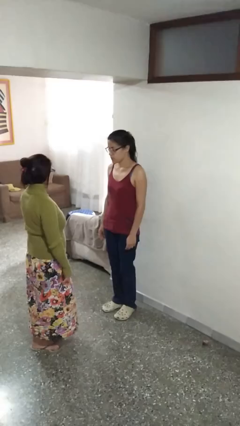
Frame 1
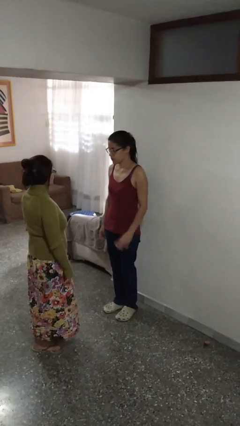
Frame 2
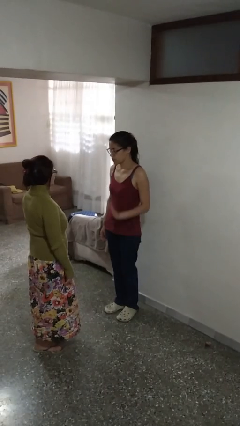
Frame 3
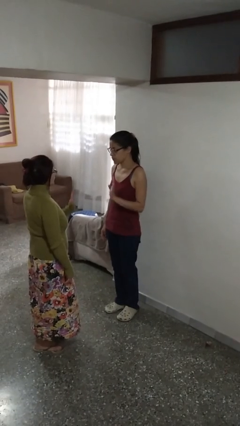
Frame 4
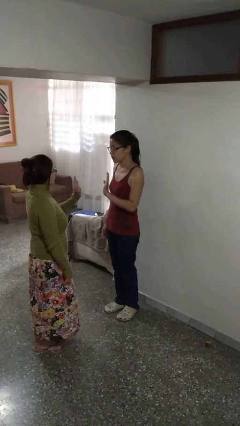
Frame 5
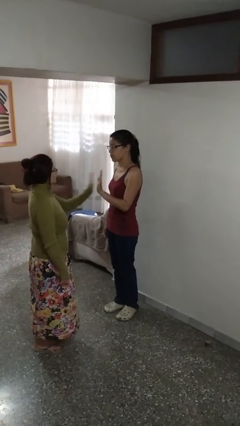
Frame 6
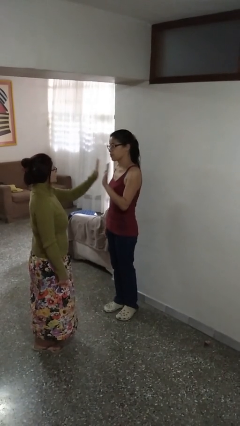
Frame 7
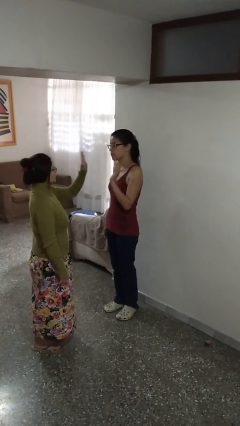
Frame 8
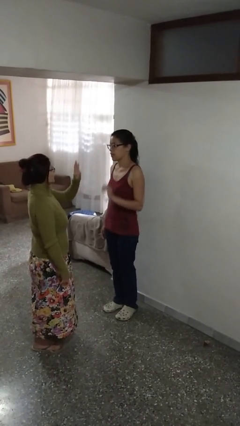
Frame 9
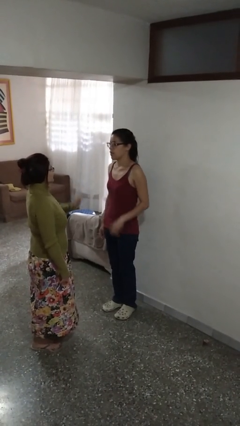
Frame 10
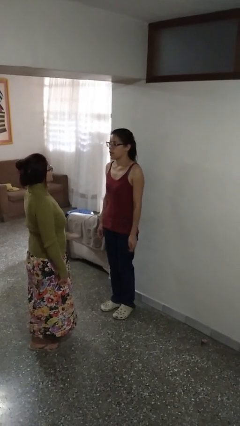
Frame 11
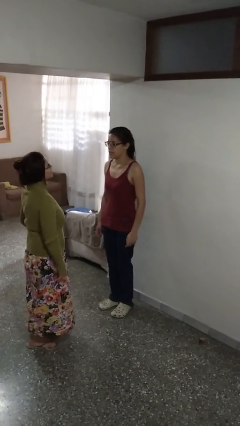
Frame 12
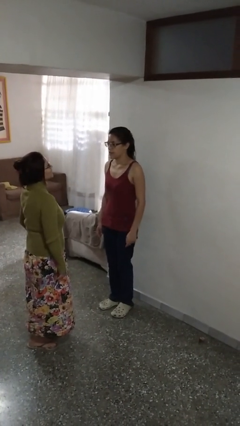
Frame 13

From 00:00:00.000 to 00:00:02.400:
person highfives hand

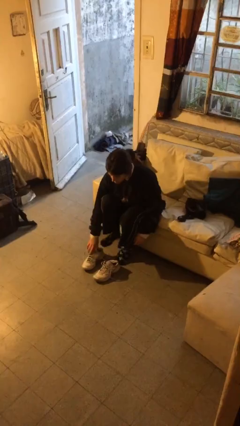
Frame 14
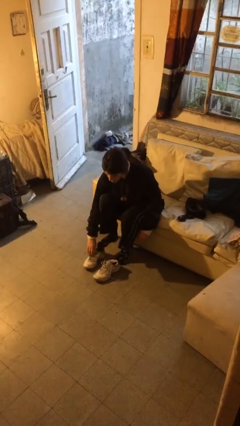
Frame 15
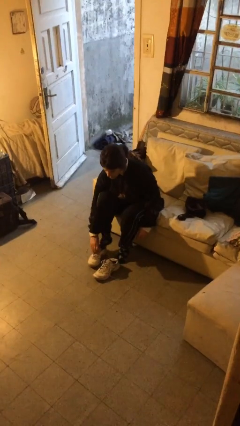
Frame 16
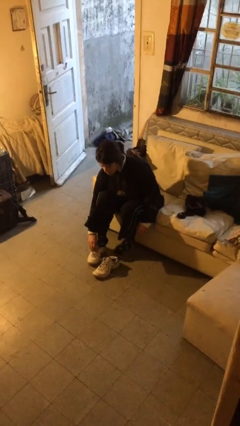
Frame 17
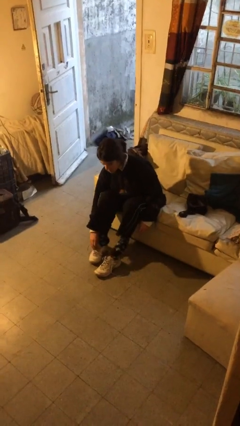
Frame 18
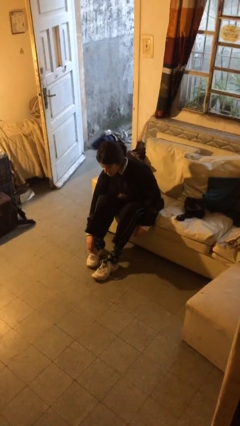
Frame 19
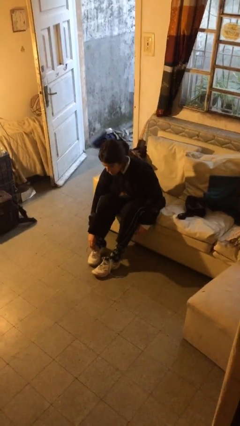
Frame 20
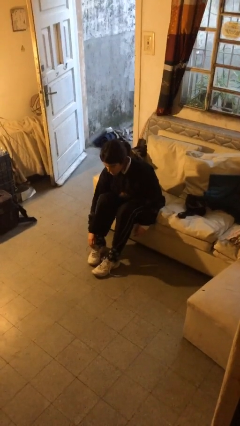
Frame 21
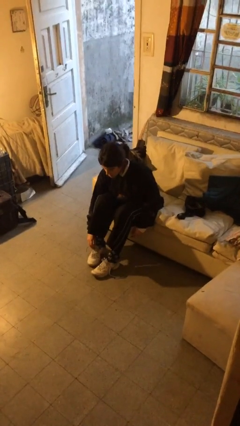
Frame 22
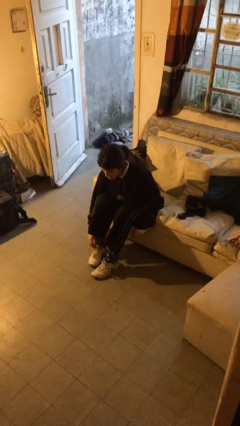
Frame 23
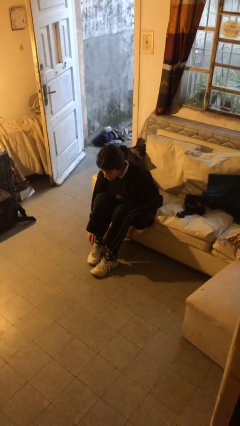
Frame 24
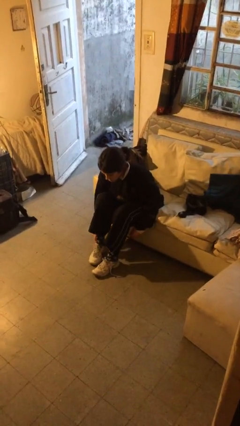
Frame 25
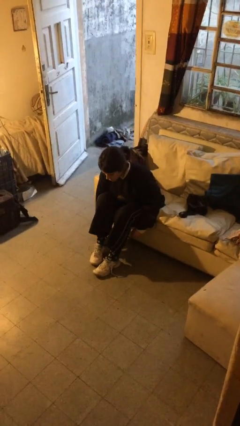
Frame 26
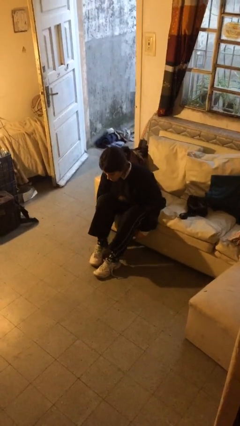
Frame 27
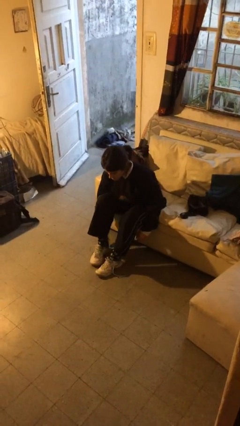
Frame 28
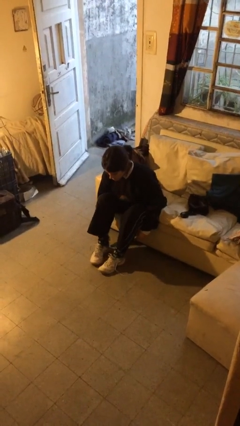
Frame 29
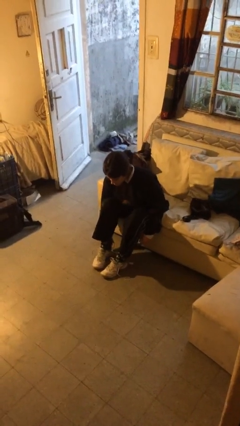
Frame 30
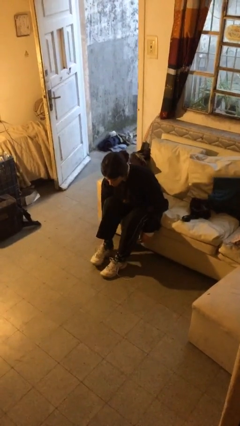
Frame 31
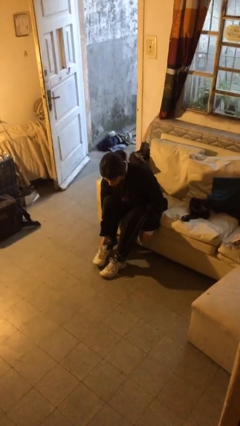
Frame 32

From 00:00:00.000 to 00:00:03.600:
person puts on shoes

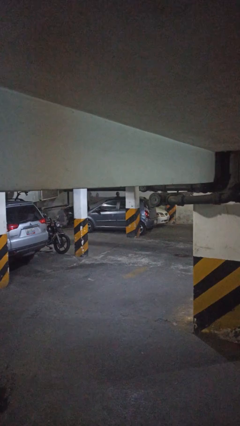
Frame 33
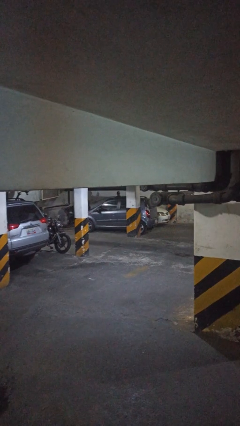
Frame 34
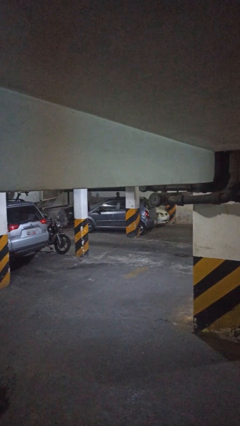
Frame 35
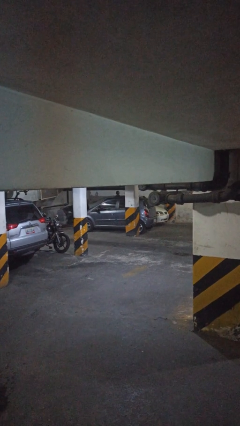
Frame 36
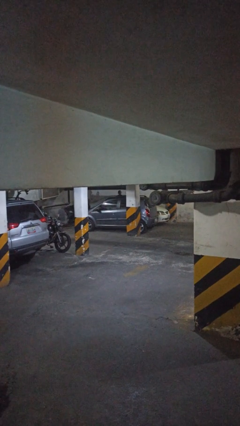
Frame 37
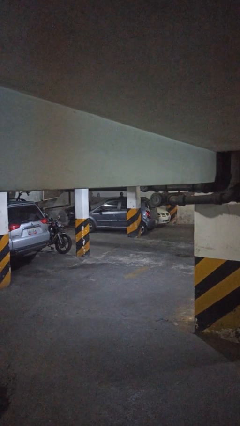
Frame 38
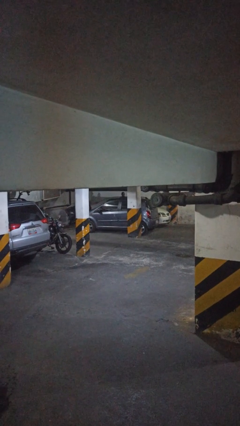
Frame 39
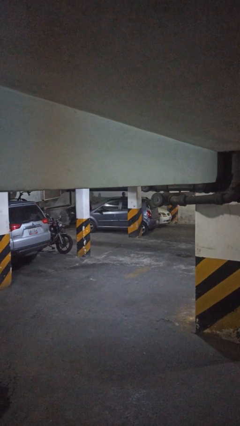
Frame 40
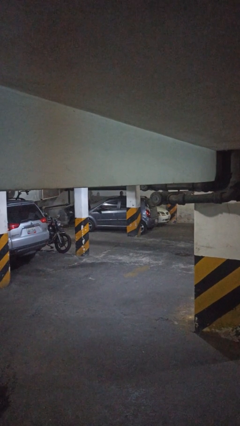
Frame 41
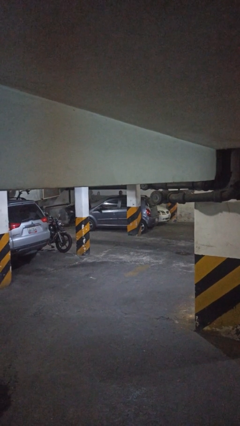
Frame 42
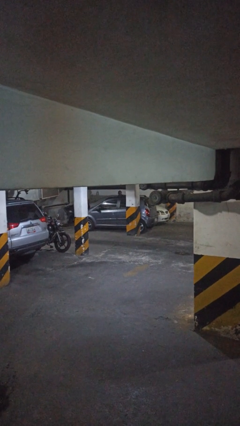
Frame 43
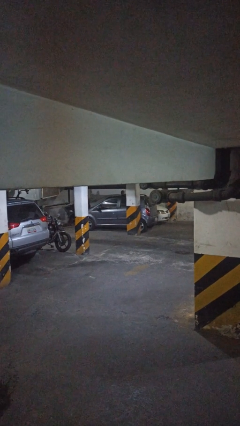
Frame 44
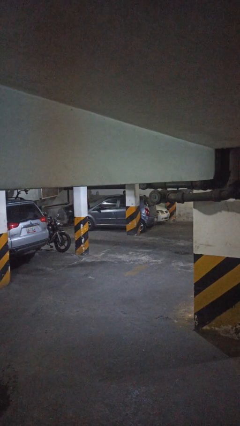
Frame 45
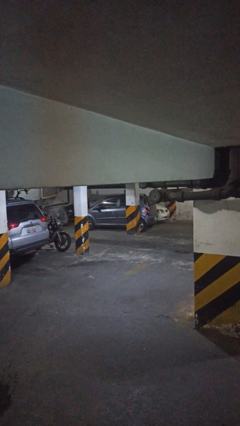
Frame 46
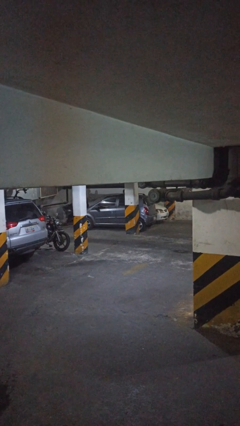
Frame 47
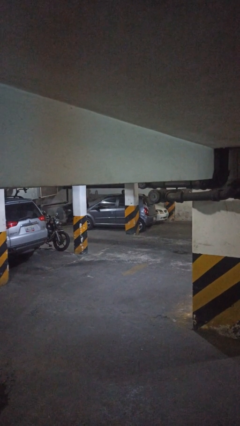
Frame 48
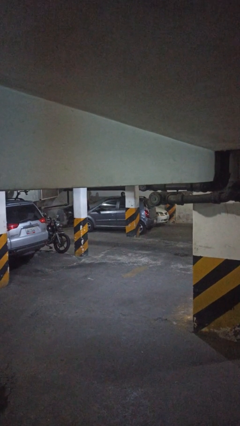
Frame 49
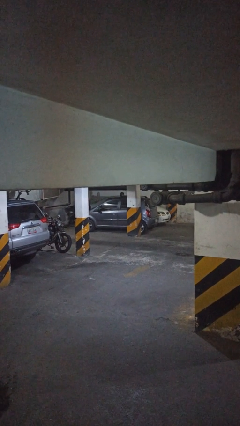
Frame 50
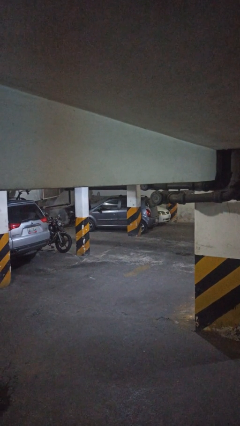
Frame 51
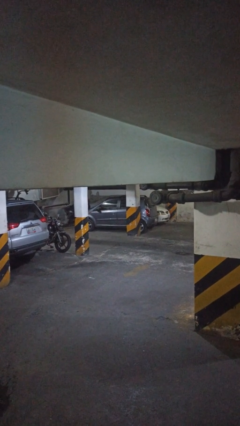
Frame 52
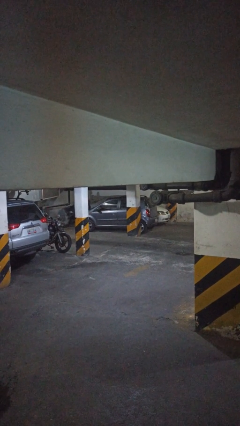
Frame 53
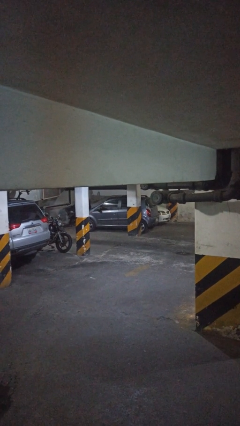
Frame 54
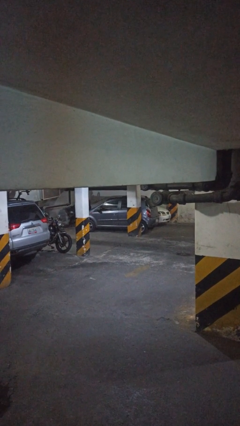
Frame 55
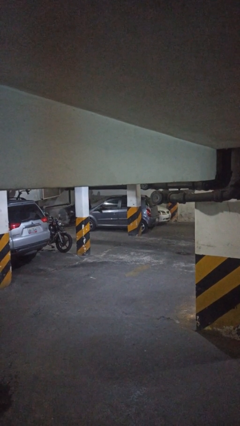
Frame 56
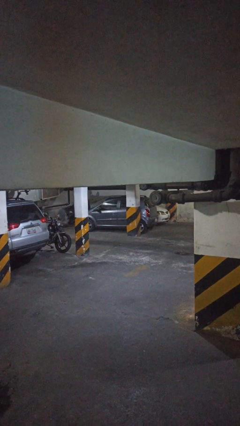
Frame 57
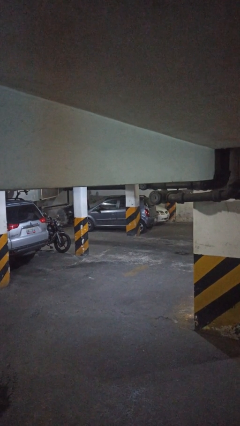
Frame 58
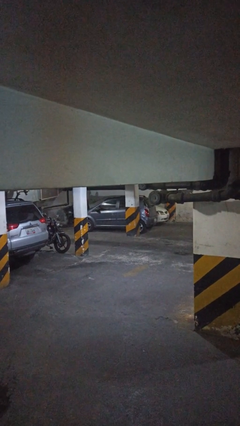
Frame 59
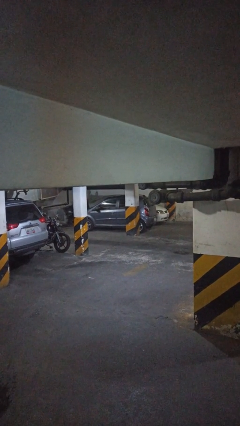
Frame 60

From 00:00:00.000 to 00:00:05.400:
car picks up person

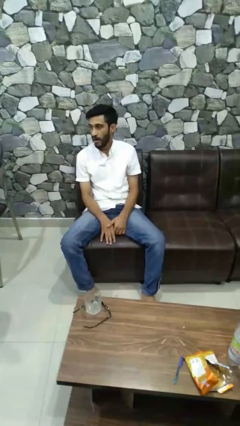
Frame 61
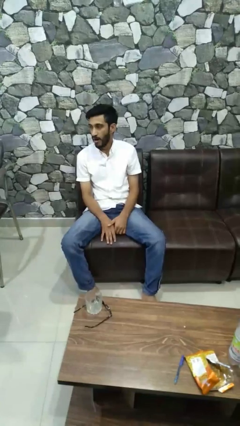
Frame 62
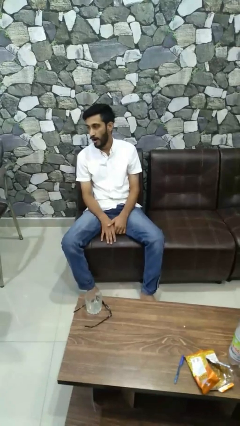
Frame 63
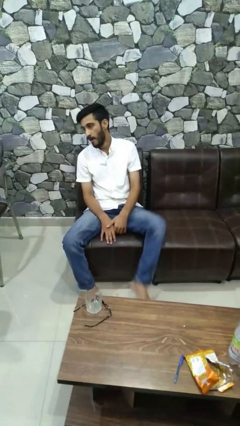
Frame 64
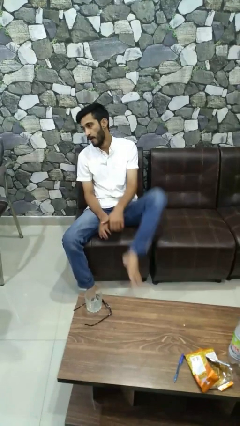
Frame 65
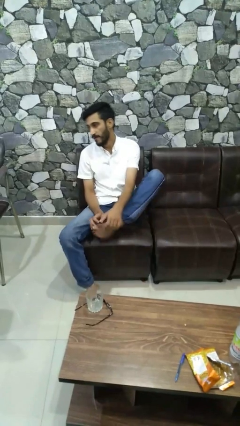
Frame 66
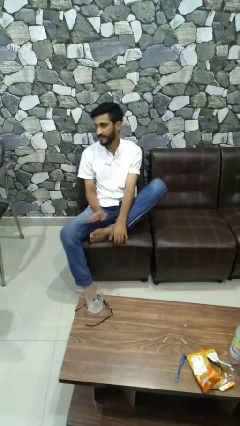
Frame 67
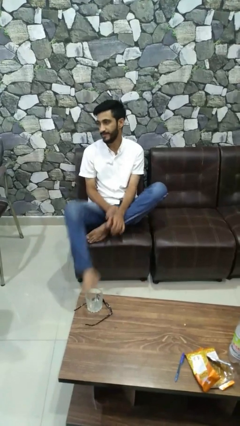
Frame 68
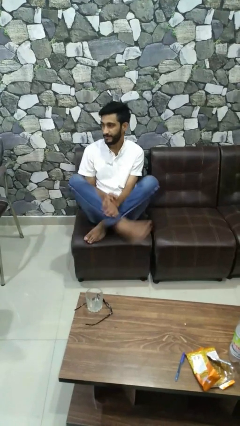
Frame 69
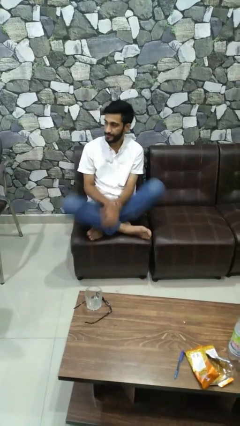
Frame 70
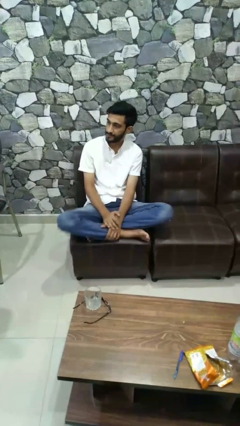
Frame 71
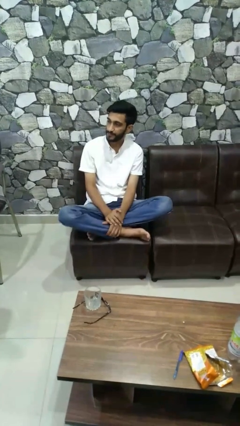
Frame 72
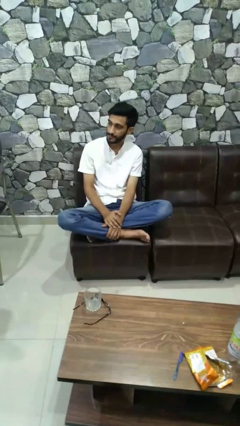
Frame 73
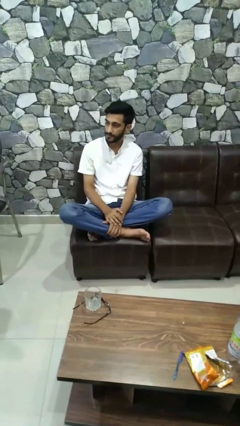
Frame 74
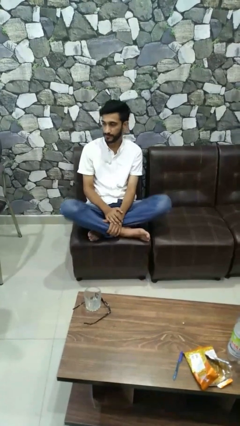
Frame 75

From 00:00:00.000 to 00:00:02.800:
person crosses legs

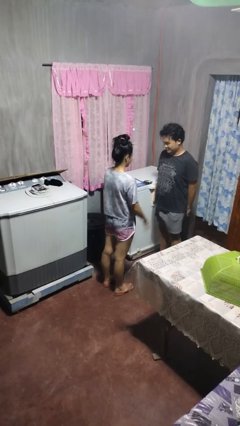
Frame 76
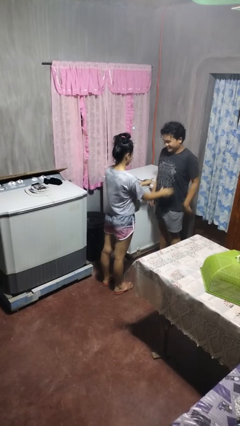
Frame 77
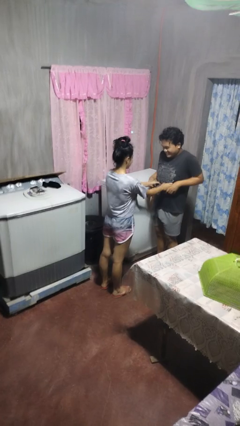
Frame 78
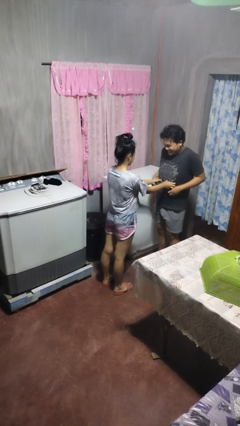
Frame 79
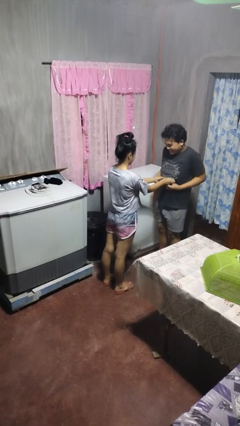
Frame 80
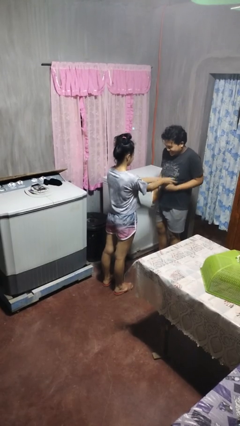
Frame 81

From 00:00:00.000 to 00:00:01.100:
person tickles person

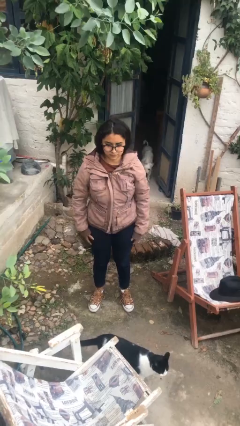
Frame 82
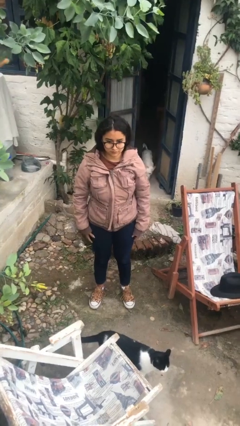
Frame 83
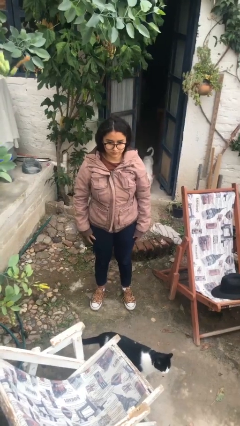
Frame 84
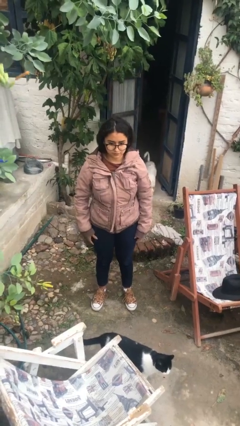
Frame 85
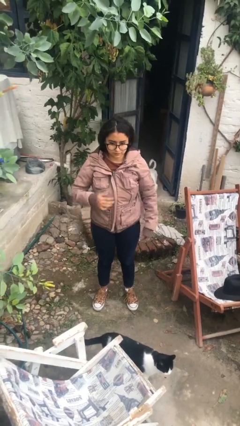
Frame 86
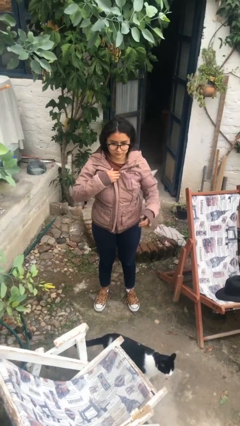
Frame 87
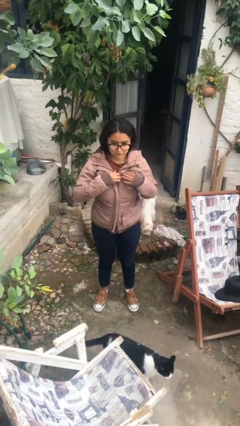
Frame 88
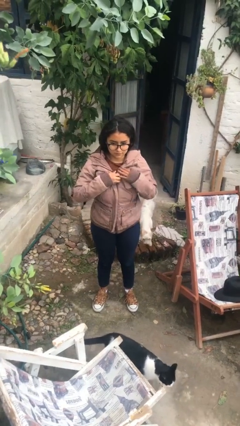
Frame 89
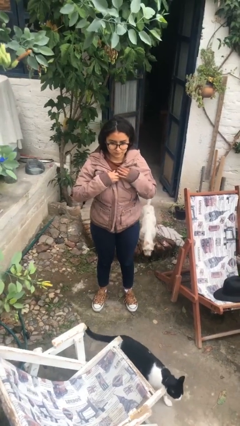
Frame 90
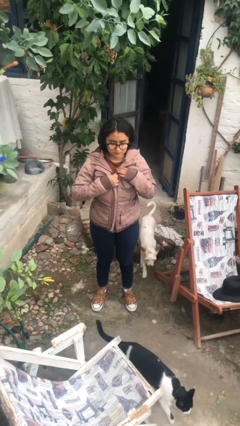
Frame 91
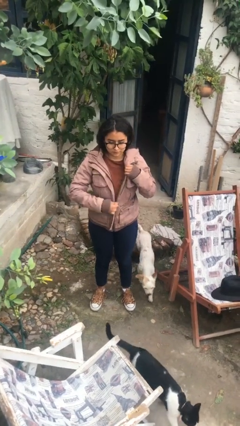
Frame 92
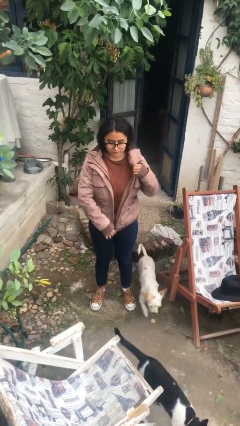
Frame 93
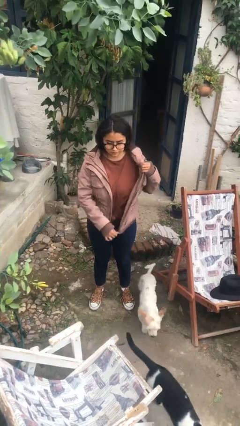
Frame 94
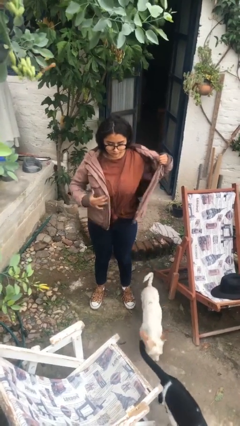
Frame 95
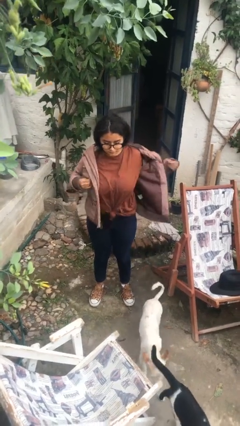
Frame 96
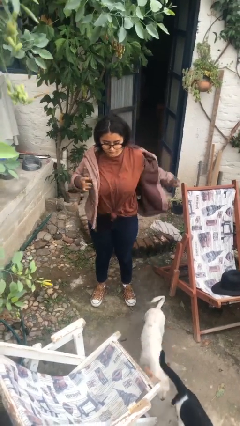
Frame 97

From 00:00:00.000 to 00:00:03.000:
person unzips jacket
